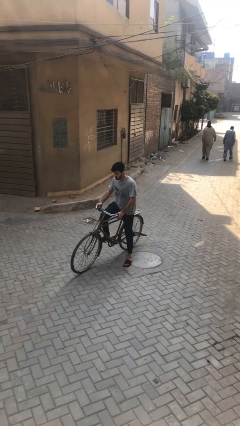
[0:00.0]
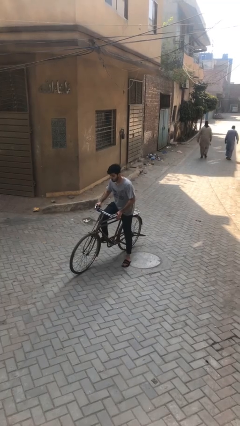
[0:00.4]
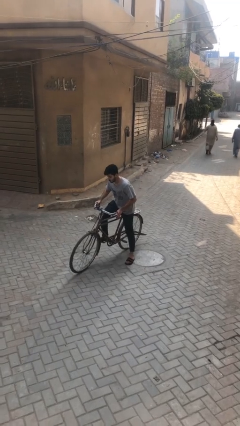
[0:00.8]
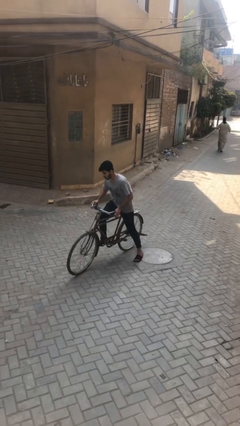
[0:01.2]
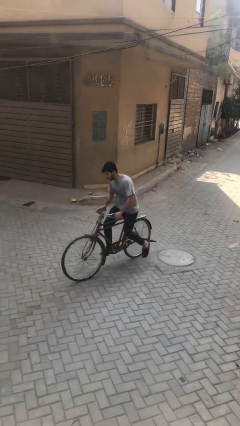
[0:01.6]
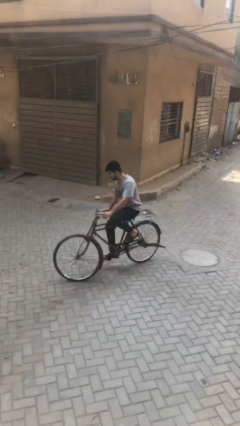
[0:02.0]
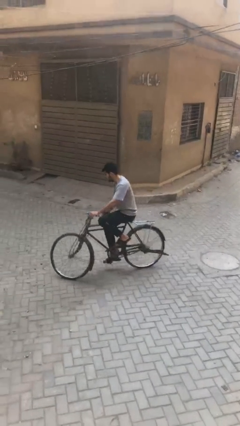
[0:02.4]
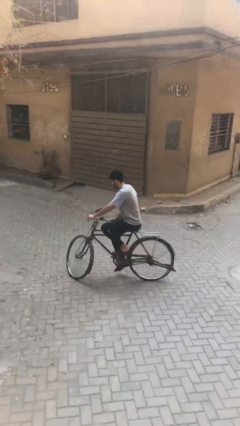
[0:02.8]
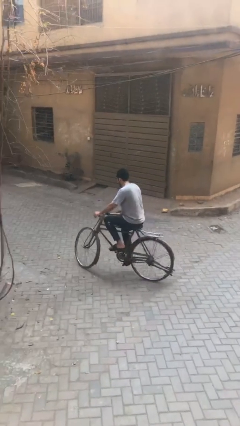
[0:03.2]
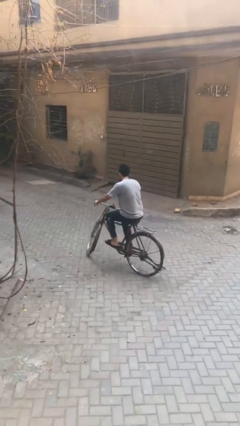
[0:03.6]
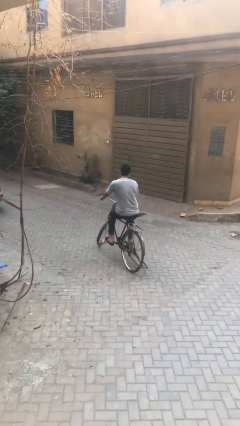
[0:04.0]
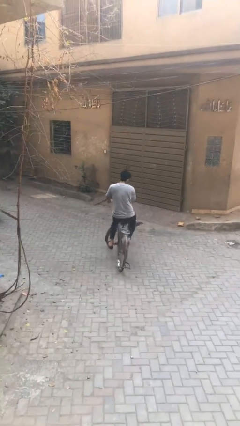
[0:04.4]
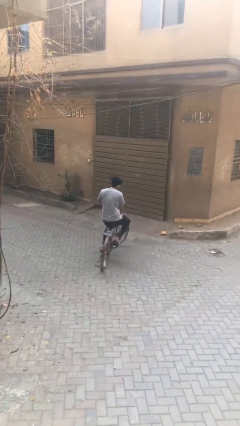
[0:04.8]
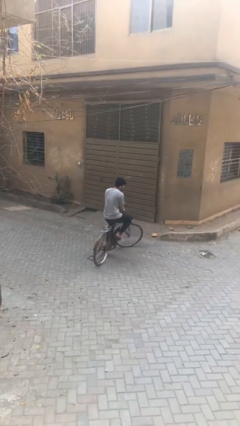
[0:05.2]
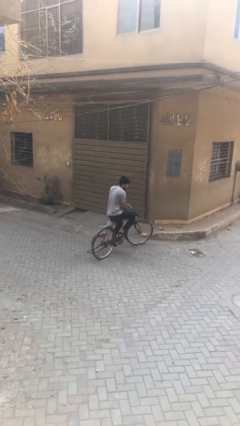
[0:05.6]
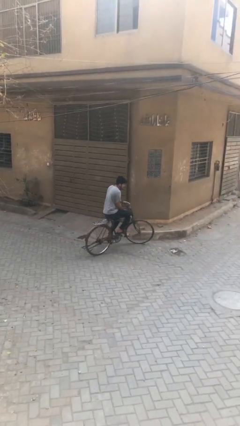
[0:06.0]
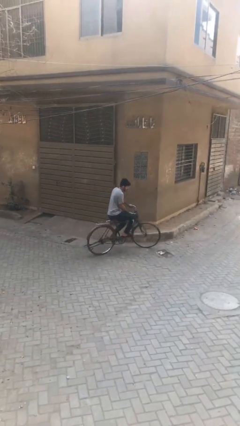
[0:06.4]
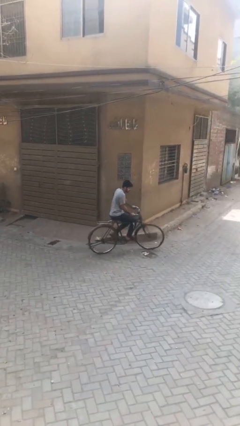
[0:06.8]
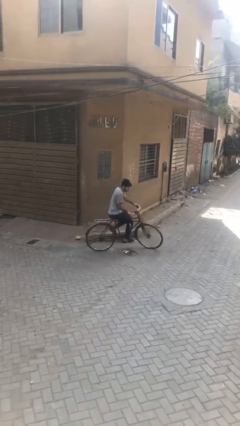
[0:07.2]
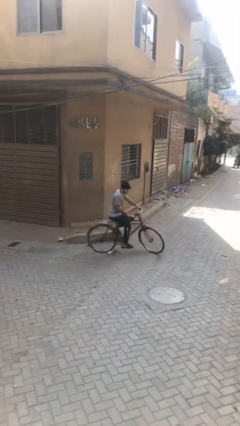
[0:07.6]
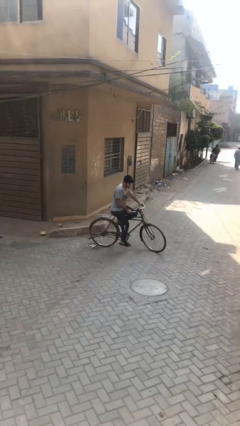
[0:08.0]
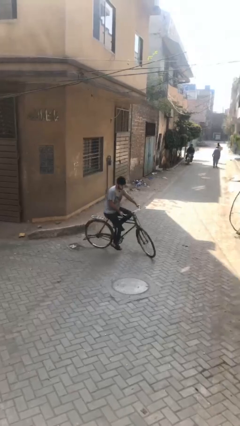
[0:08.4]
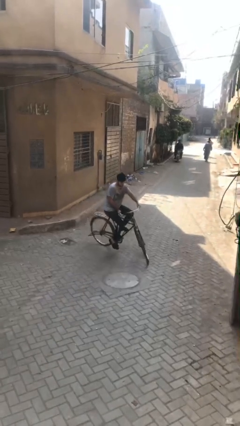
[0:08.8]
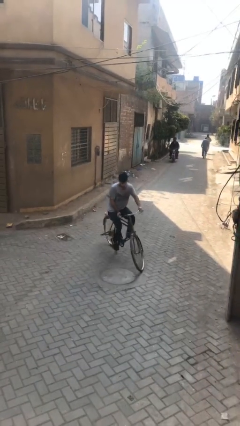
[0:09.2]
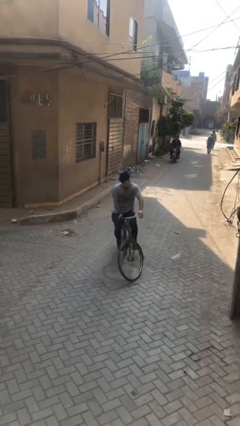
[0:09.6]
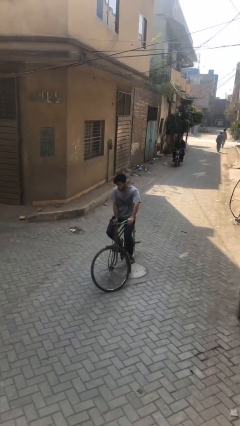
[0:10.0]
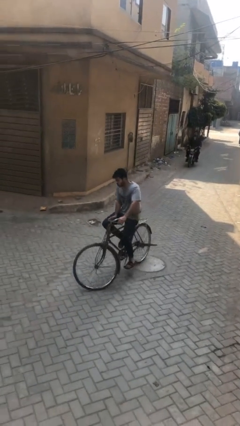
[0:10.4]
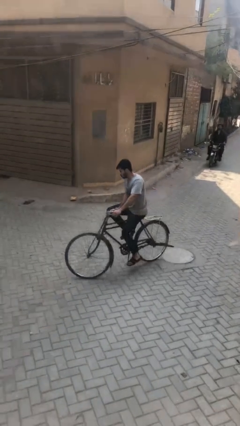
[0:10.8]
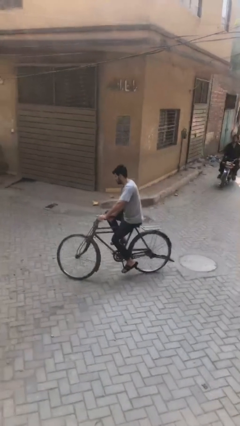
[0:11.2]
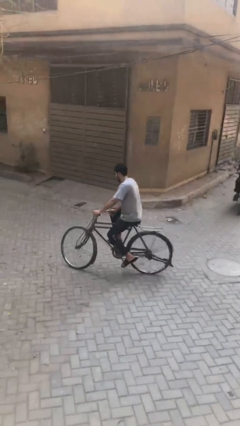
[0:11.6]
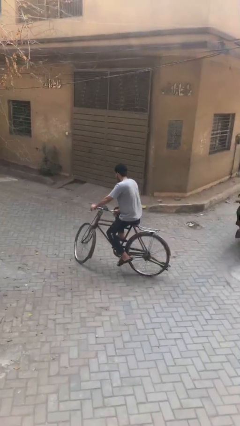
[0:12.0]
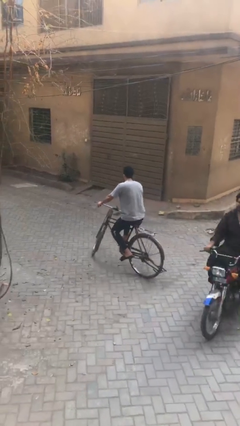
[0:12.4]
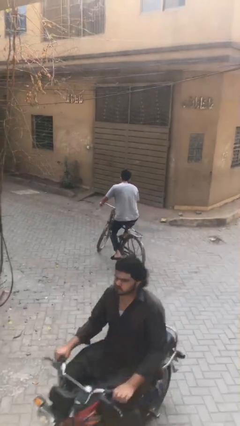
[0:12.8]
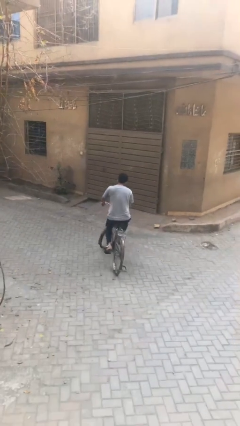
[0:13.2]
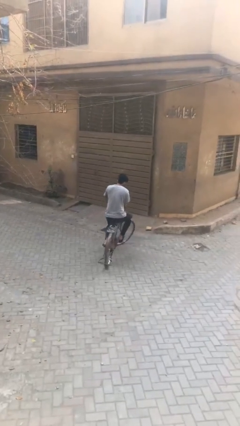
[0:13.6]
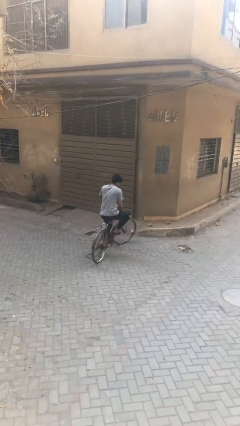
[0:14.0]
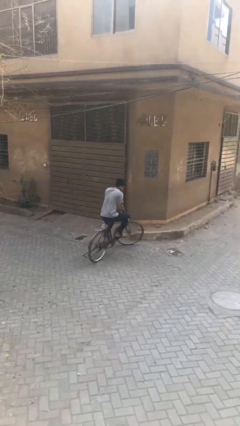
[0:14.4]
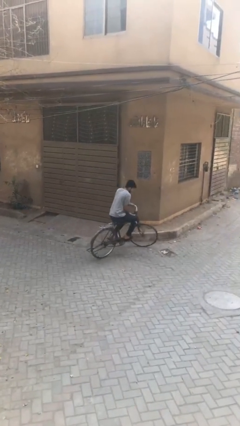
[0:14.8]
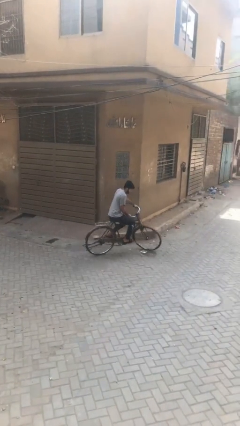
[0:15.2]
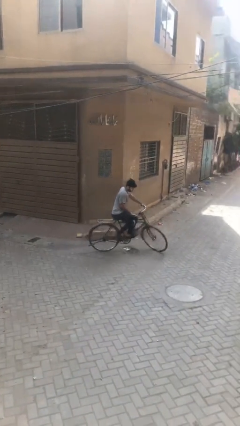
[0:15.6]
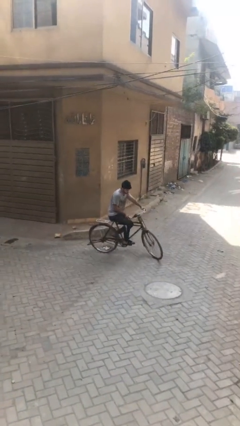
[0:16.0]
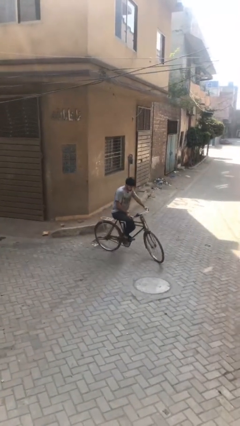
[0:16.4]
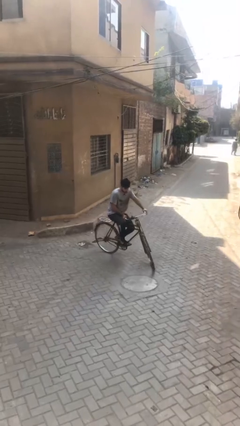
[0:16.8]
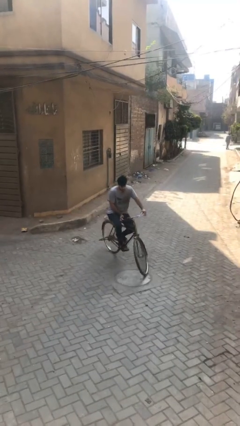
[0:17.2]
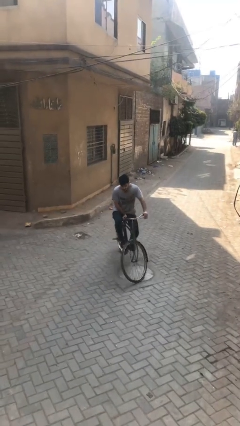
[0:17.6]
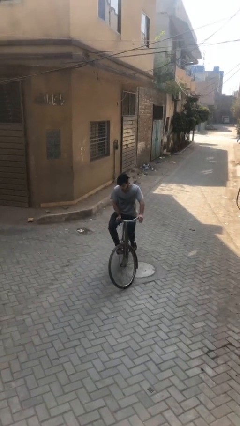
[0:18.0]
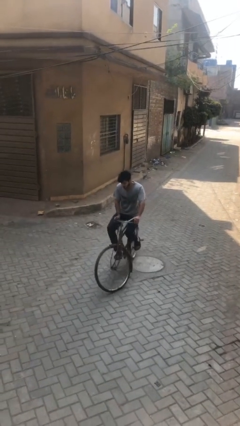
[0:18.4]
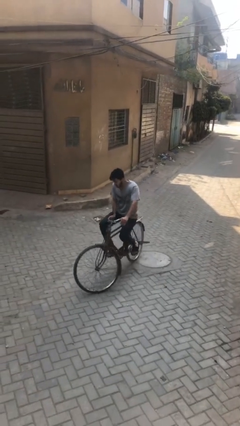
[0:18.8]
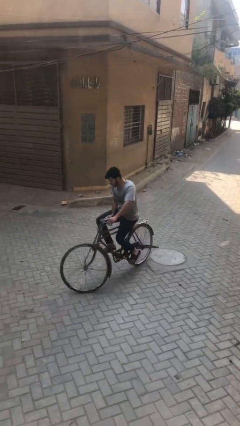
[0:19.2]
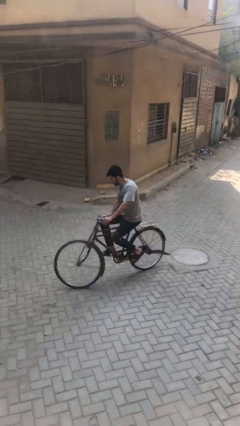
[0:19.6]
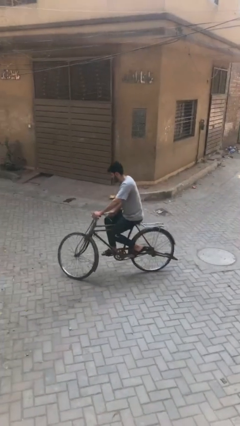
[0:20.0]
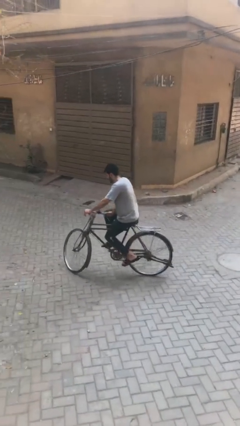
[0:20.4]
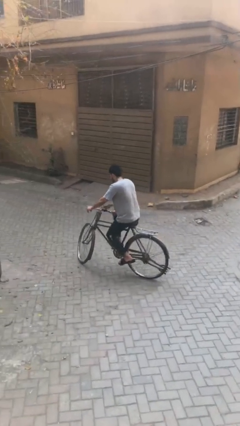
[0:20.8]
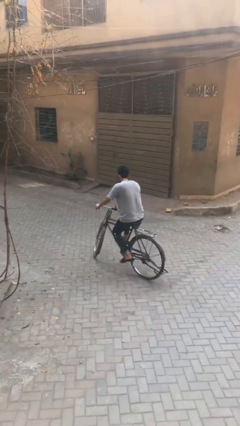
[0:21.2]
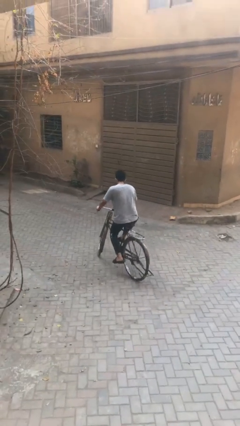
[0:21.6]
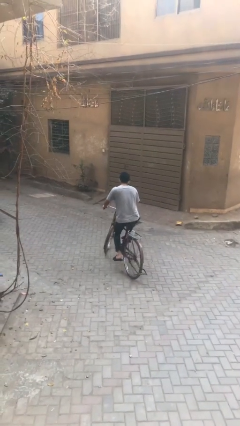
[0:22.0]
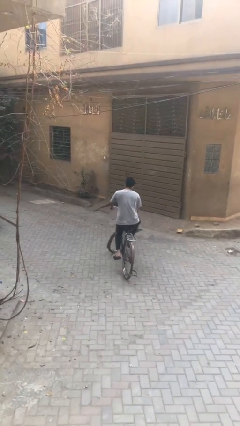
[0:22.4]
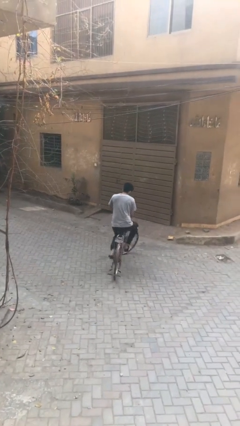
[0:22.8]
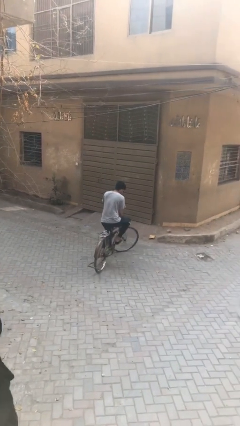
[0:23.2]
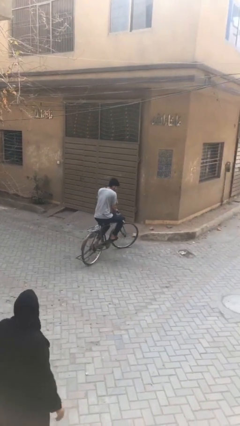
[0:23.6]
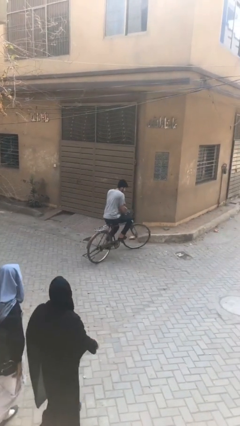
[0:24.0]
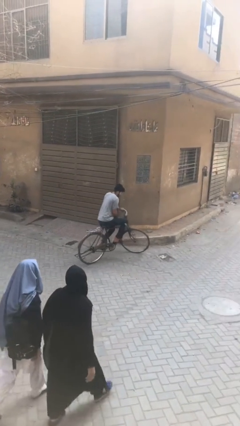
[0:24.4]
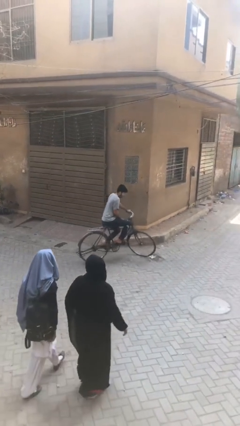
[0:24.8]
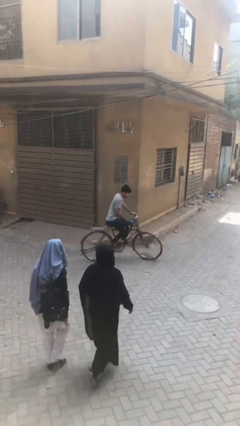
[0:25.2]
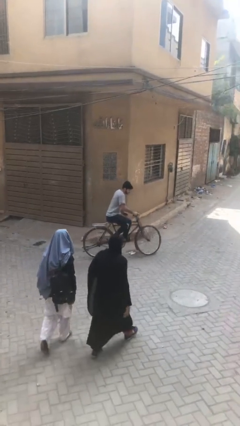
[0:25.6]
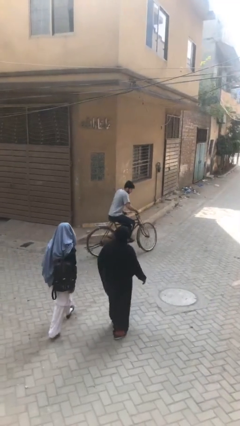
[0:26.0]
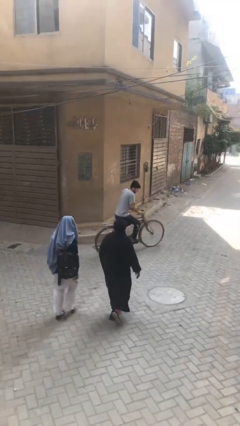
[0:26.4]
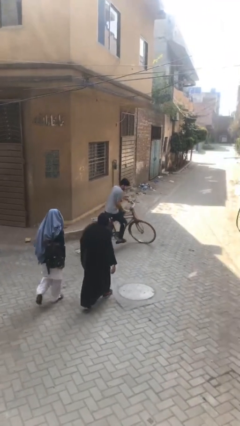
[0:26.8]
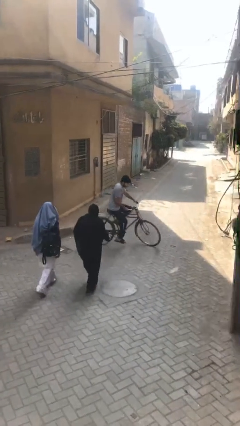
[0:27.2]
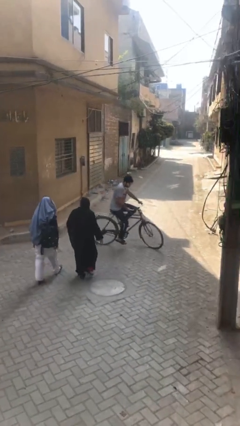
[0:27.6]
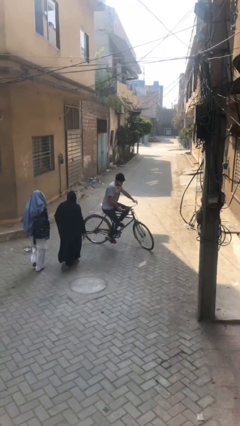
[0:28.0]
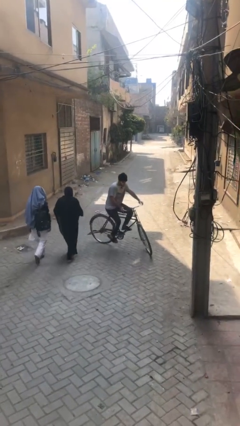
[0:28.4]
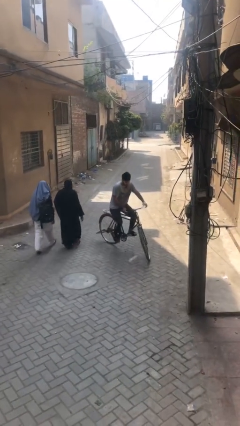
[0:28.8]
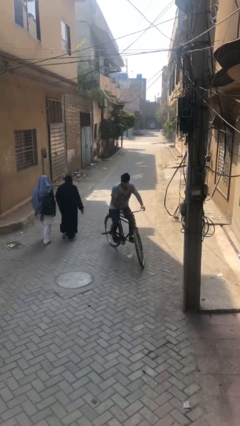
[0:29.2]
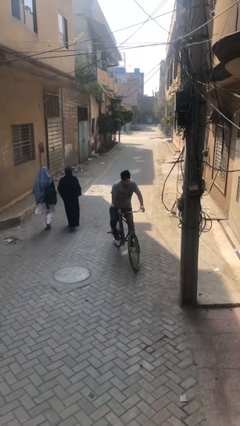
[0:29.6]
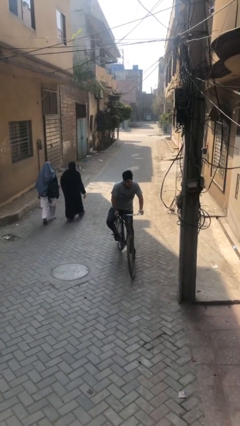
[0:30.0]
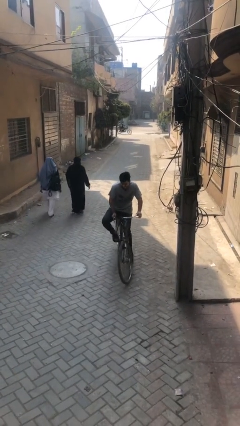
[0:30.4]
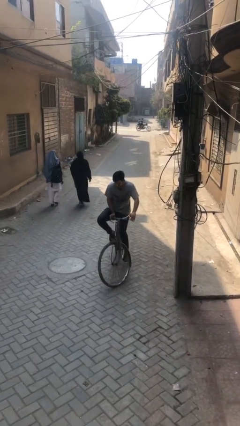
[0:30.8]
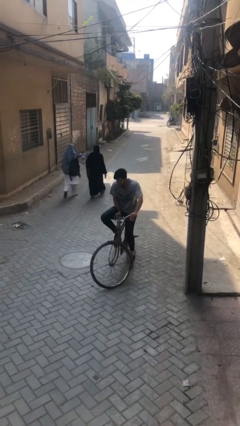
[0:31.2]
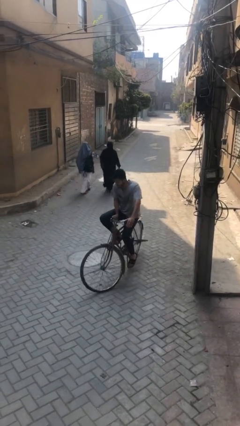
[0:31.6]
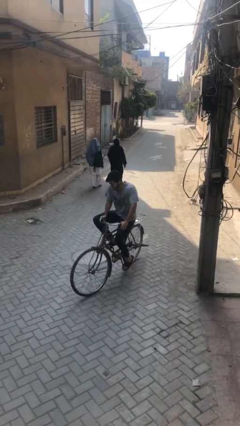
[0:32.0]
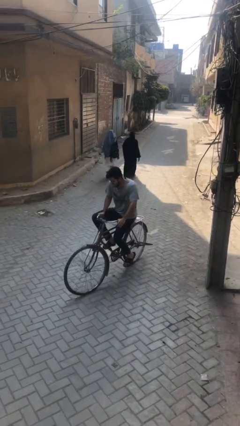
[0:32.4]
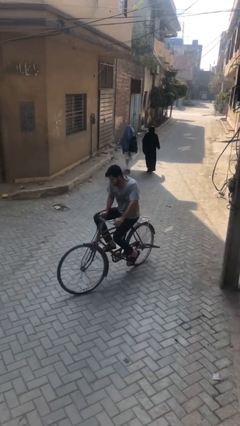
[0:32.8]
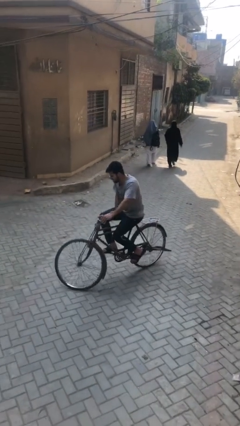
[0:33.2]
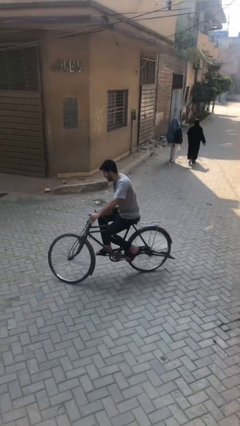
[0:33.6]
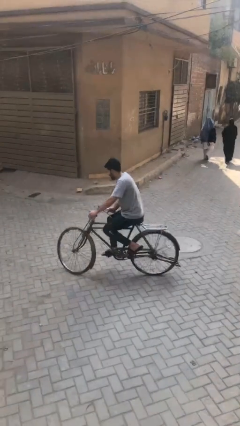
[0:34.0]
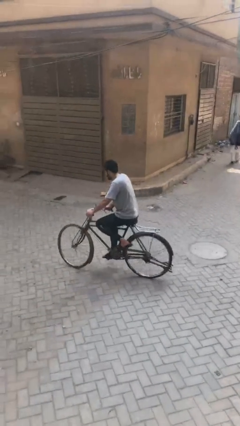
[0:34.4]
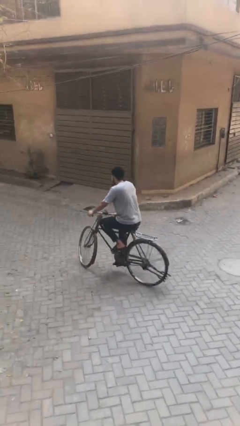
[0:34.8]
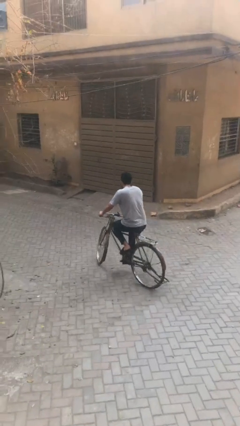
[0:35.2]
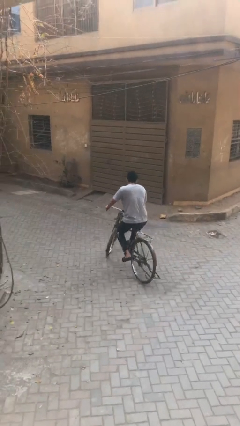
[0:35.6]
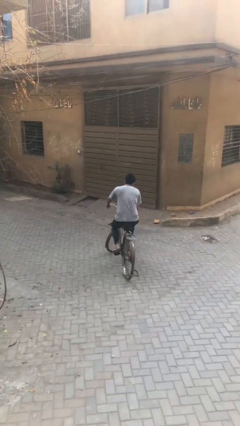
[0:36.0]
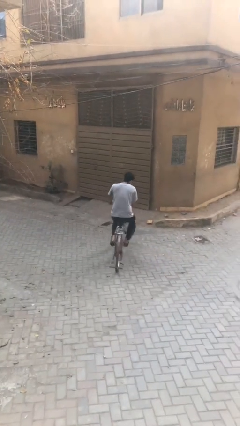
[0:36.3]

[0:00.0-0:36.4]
person rides bicycle
